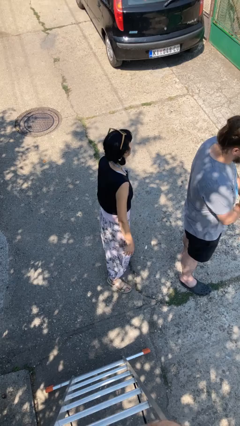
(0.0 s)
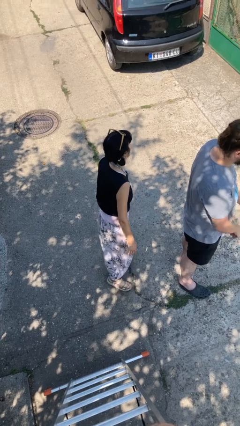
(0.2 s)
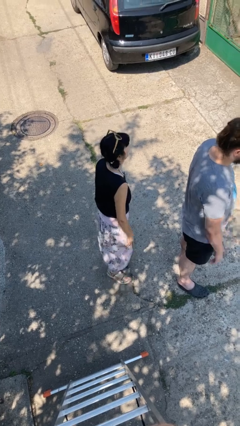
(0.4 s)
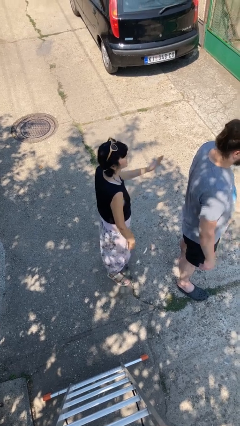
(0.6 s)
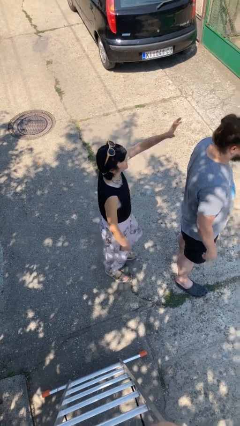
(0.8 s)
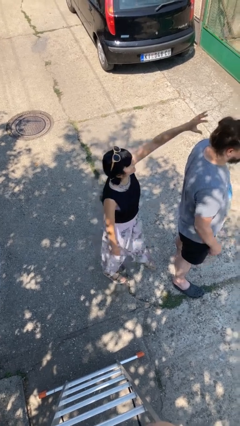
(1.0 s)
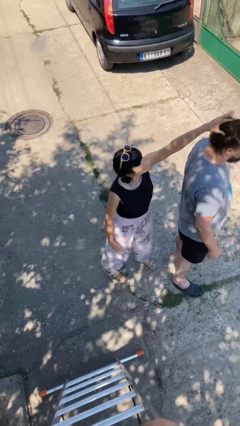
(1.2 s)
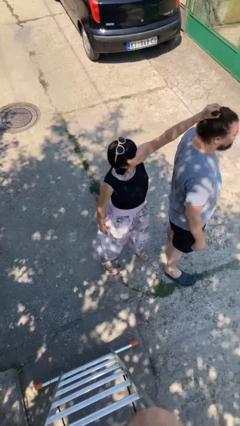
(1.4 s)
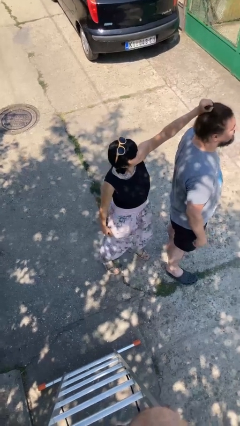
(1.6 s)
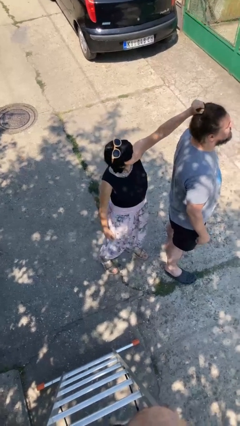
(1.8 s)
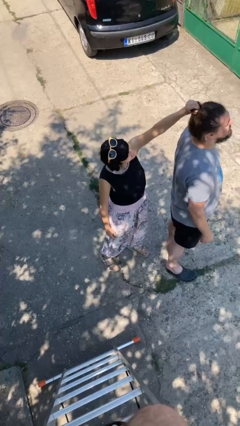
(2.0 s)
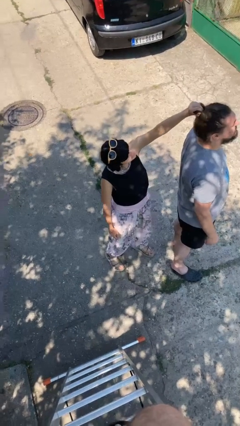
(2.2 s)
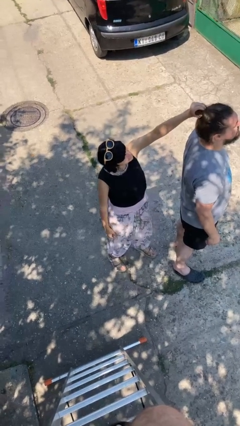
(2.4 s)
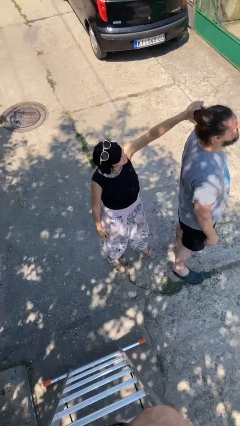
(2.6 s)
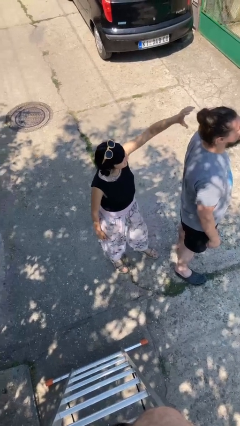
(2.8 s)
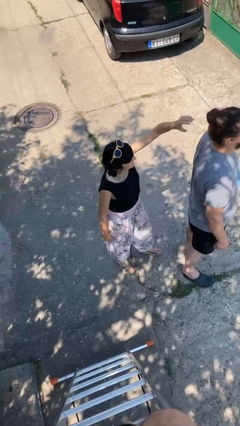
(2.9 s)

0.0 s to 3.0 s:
person grabs person by hair

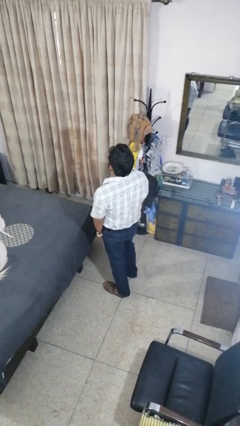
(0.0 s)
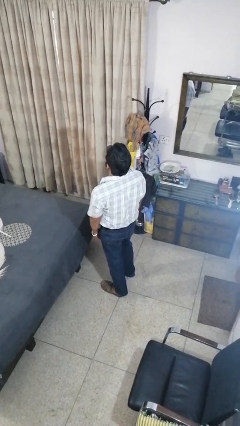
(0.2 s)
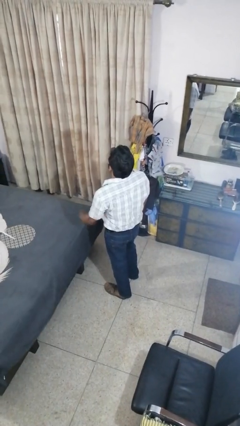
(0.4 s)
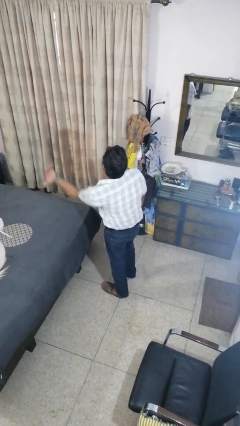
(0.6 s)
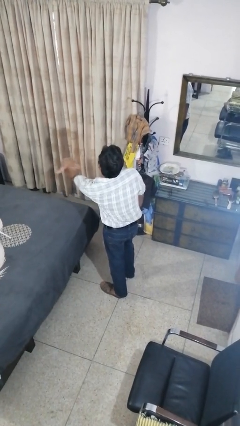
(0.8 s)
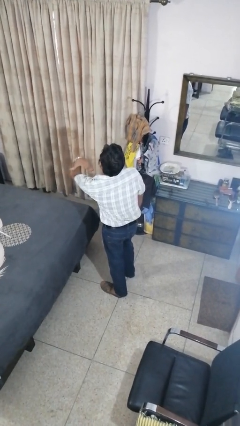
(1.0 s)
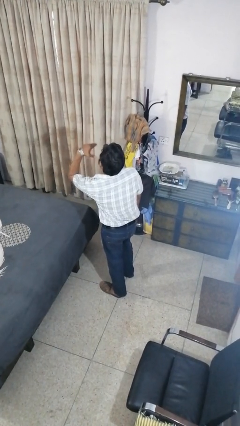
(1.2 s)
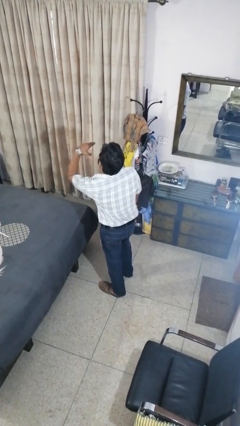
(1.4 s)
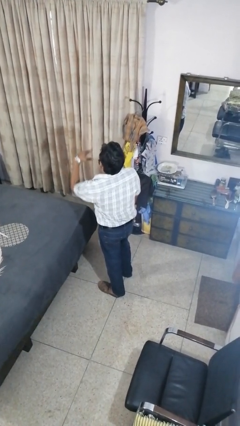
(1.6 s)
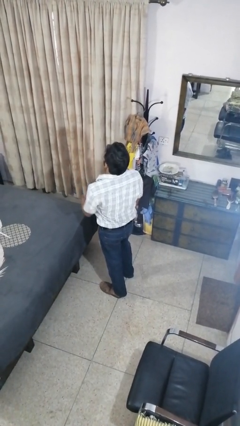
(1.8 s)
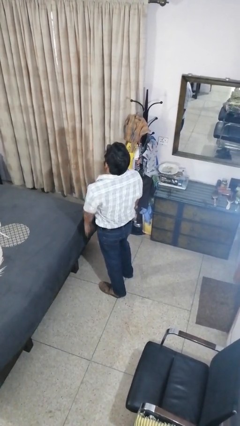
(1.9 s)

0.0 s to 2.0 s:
person gestures cut

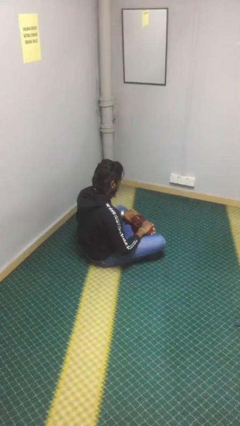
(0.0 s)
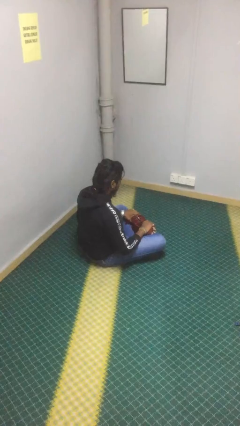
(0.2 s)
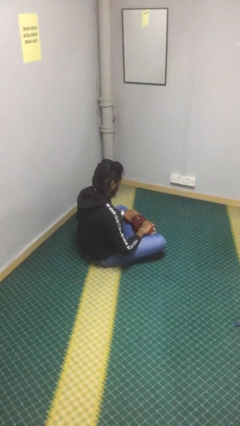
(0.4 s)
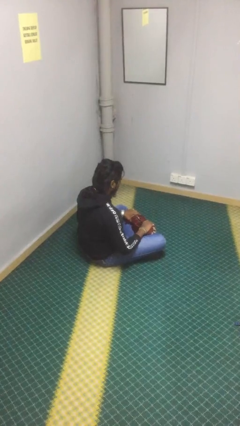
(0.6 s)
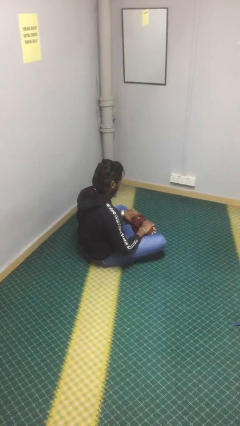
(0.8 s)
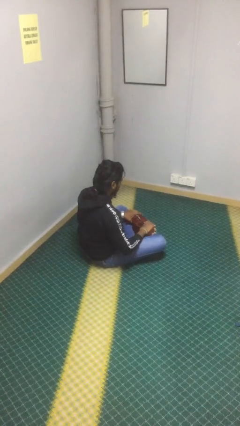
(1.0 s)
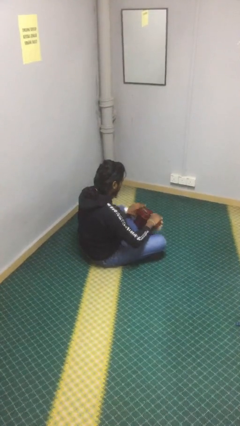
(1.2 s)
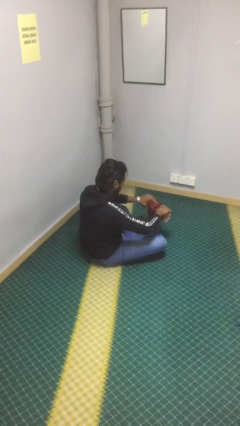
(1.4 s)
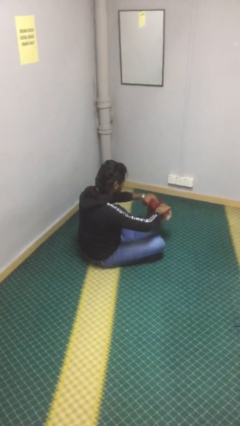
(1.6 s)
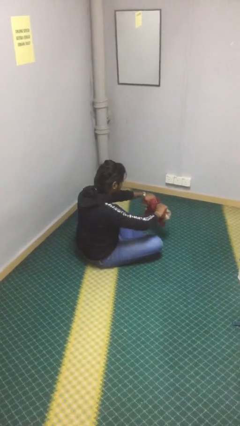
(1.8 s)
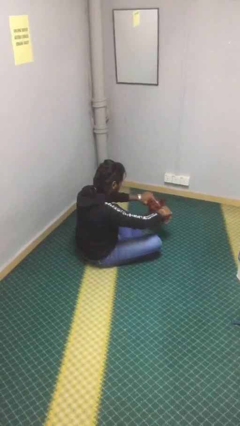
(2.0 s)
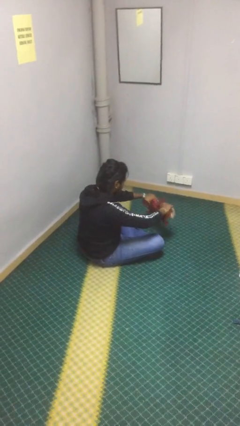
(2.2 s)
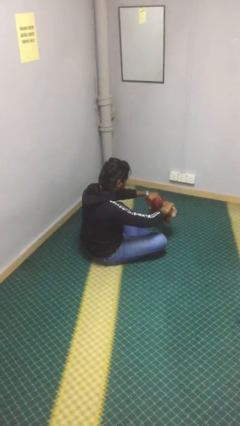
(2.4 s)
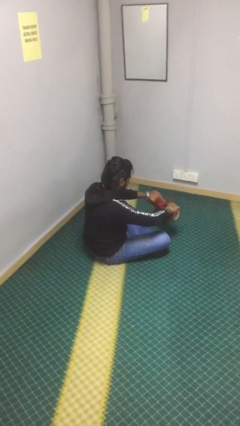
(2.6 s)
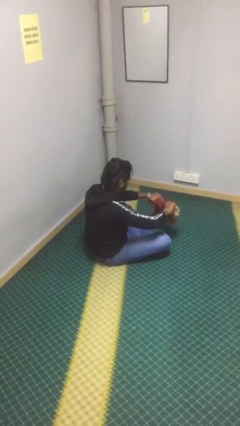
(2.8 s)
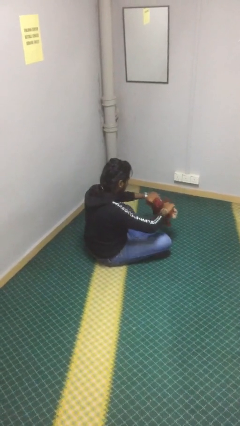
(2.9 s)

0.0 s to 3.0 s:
person squeezes object

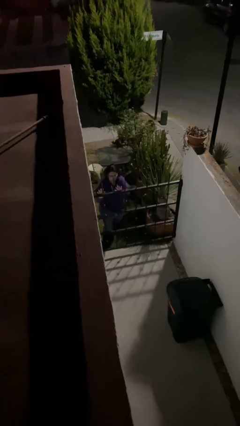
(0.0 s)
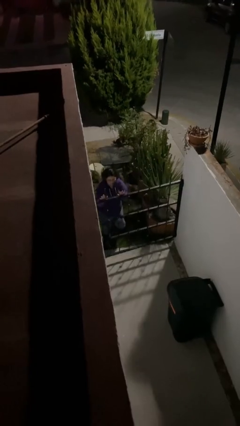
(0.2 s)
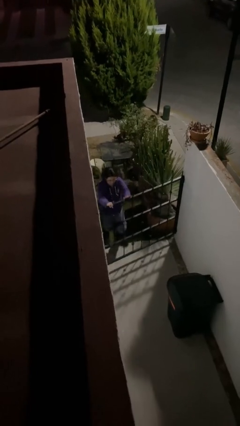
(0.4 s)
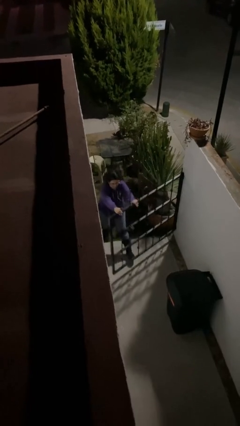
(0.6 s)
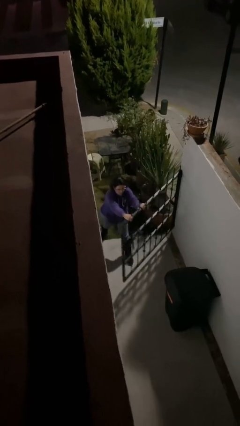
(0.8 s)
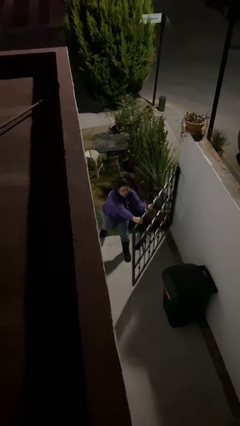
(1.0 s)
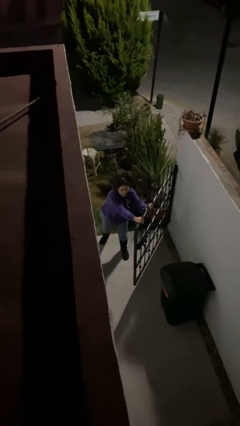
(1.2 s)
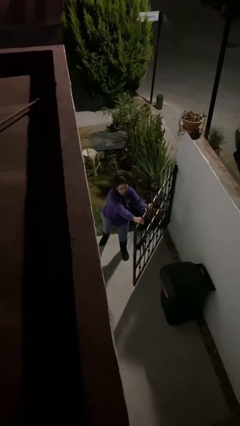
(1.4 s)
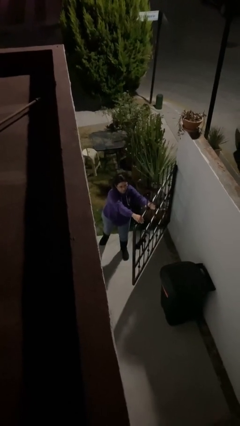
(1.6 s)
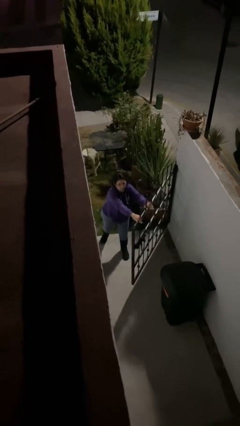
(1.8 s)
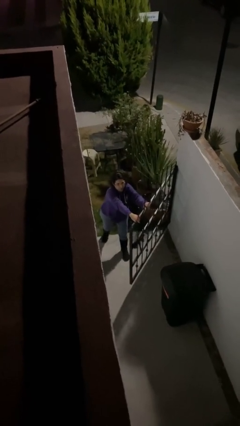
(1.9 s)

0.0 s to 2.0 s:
person opens facility door

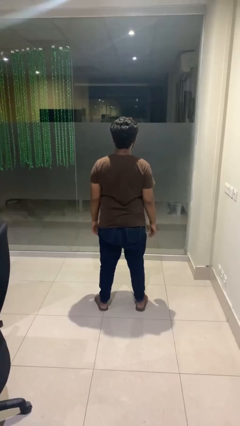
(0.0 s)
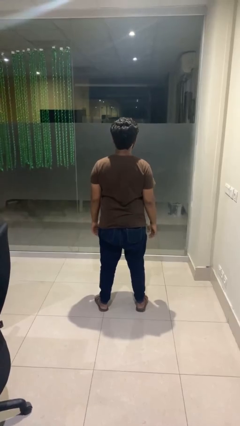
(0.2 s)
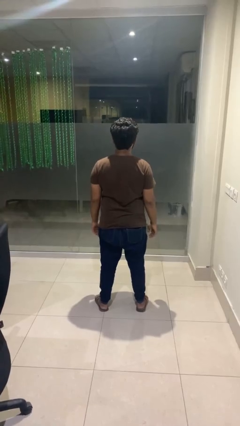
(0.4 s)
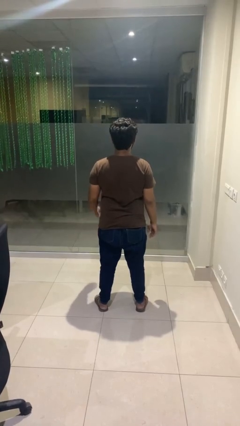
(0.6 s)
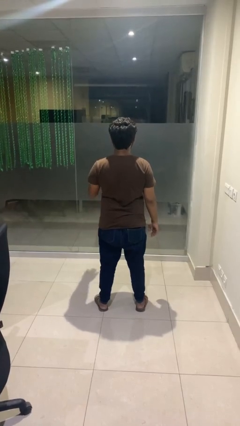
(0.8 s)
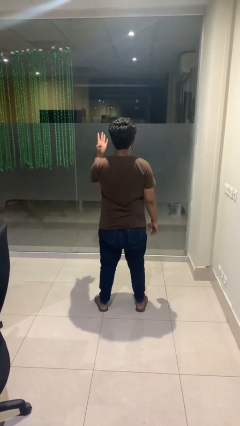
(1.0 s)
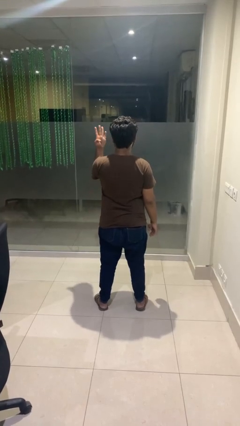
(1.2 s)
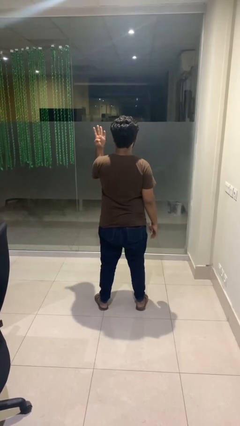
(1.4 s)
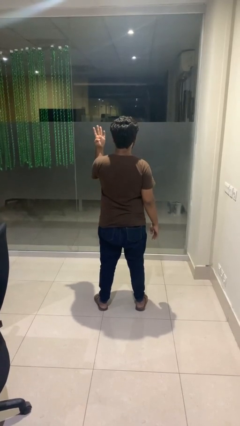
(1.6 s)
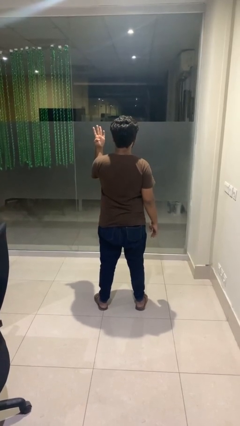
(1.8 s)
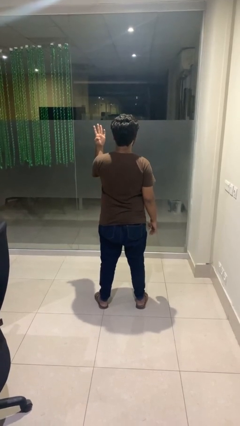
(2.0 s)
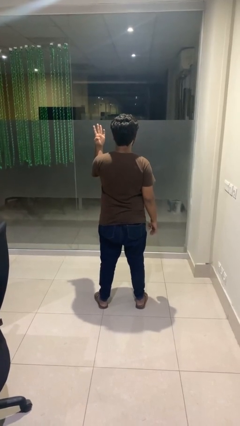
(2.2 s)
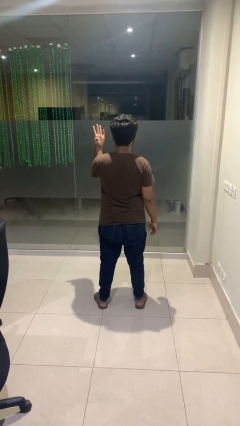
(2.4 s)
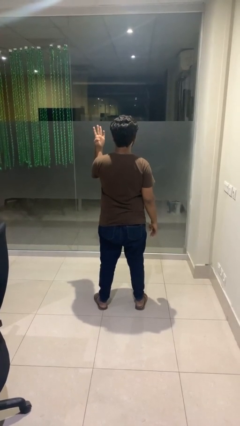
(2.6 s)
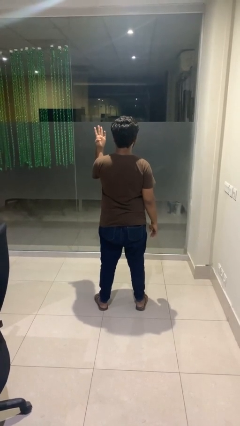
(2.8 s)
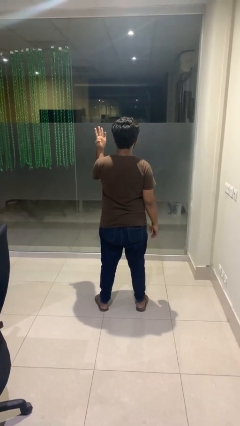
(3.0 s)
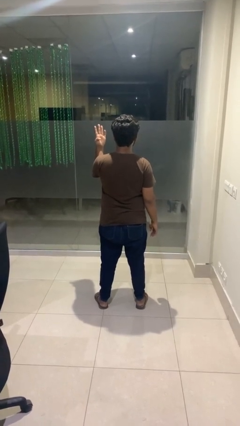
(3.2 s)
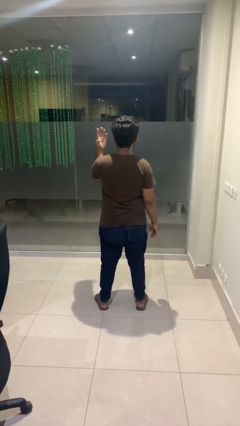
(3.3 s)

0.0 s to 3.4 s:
person gestures number four

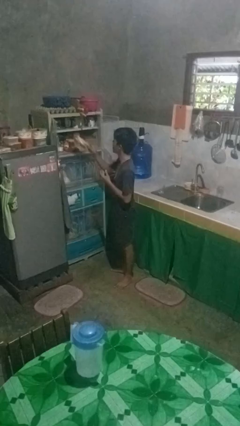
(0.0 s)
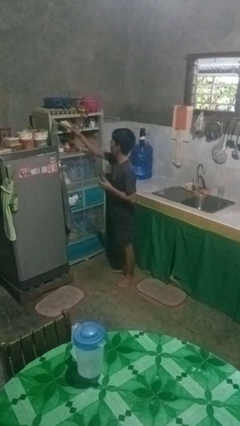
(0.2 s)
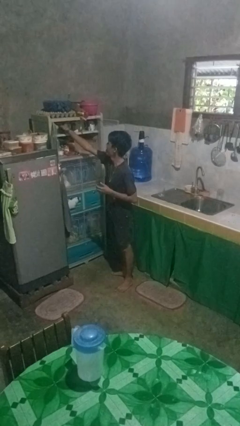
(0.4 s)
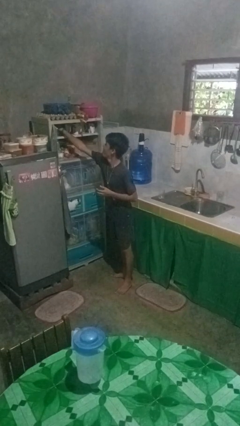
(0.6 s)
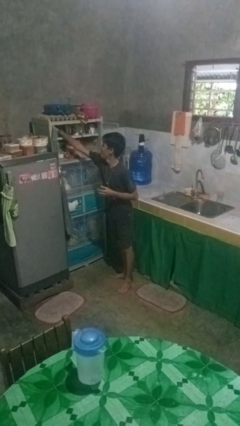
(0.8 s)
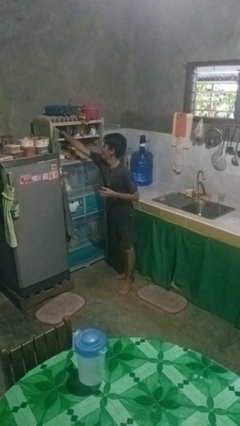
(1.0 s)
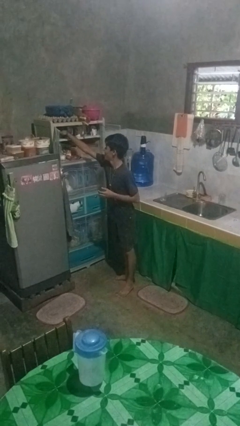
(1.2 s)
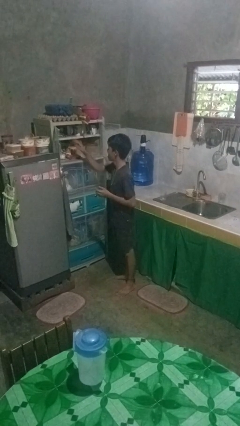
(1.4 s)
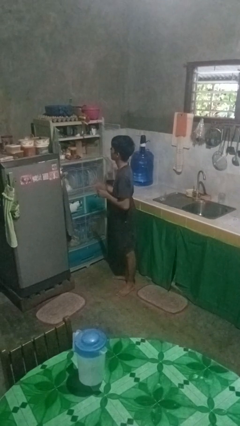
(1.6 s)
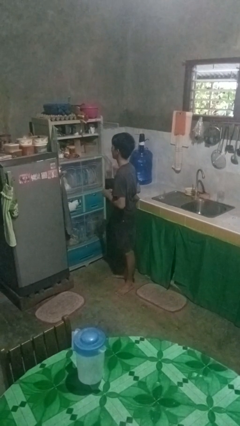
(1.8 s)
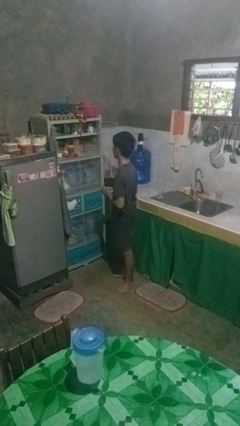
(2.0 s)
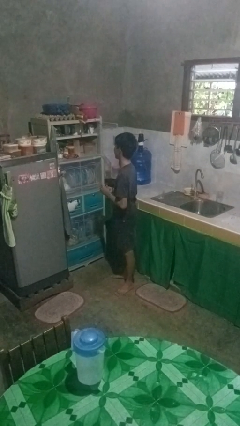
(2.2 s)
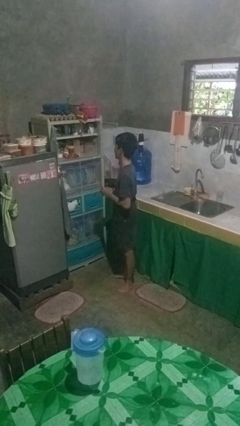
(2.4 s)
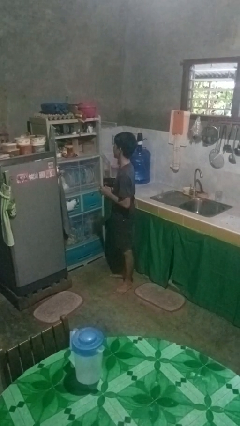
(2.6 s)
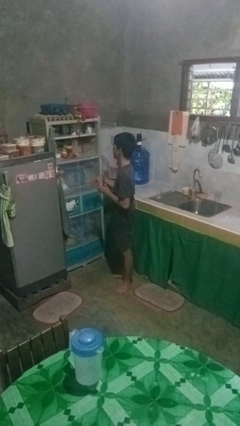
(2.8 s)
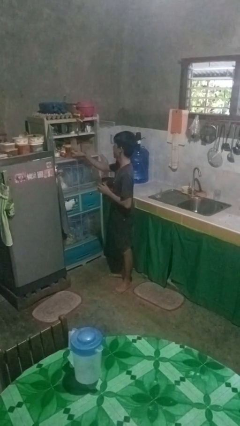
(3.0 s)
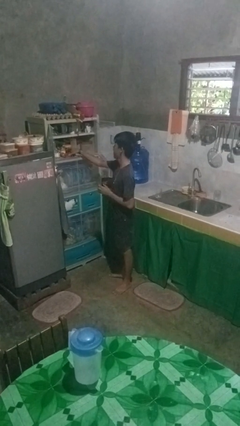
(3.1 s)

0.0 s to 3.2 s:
person puts object in cabinet

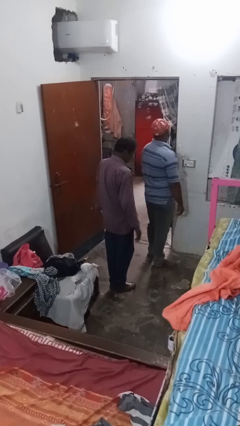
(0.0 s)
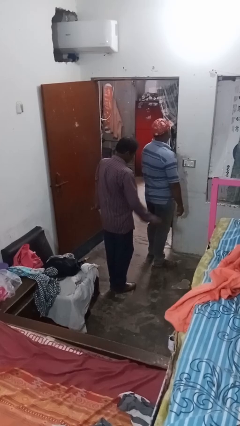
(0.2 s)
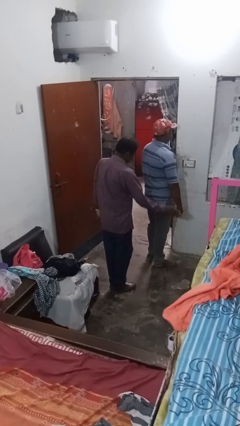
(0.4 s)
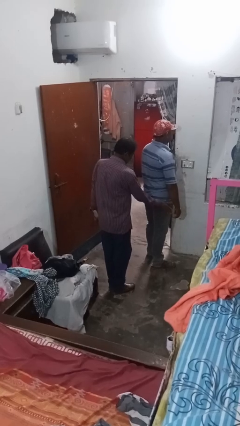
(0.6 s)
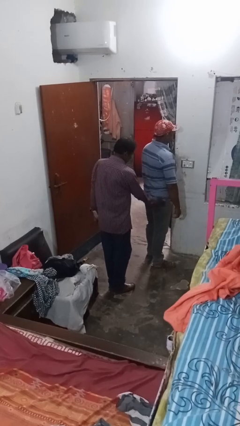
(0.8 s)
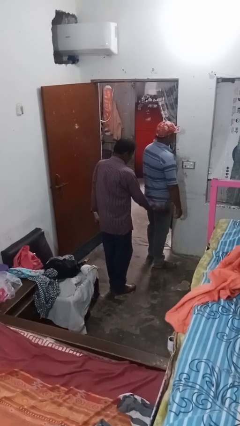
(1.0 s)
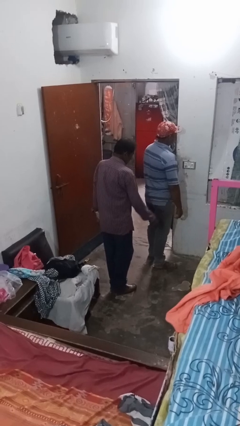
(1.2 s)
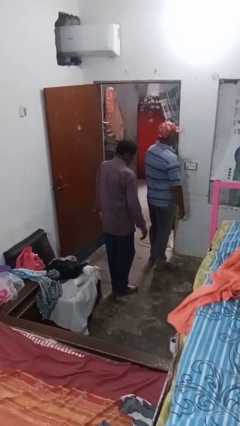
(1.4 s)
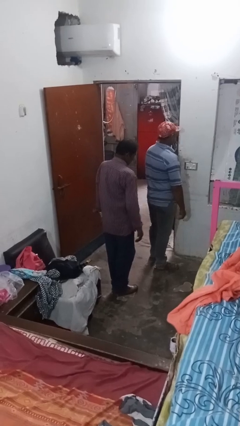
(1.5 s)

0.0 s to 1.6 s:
person bumps into person
